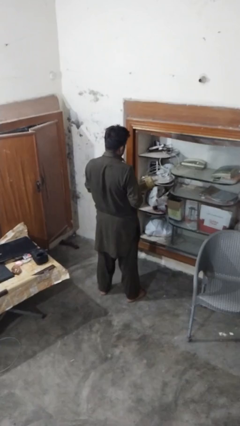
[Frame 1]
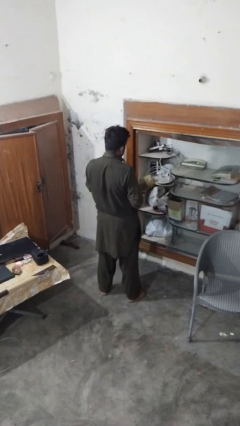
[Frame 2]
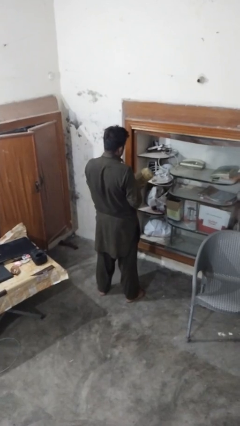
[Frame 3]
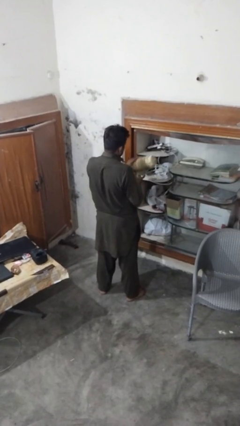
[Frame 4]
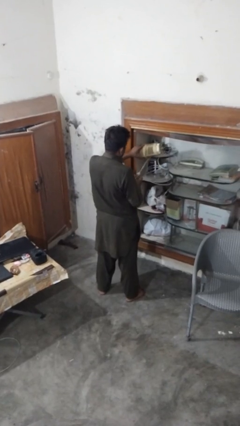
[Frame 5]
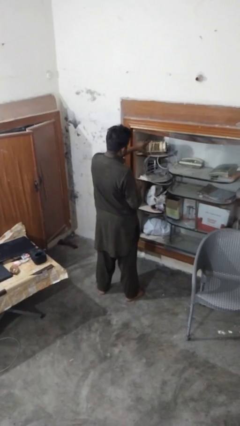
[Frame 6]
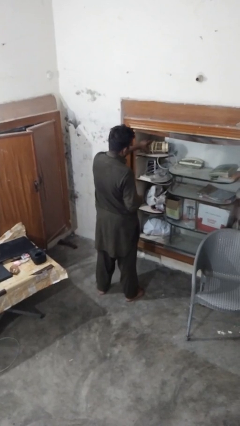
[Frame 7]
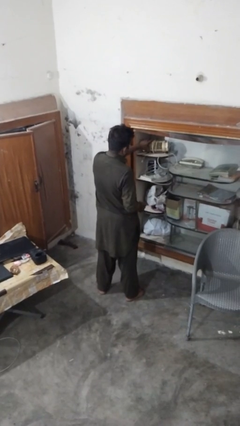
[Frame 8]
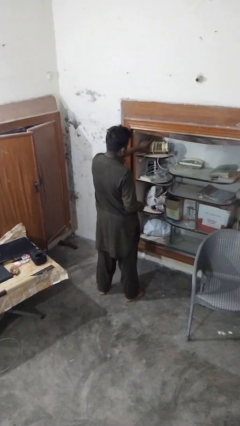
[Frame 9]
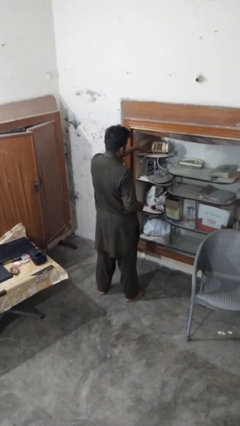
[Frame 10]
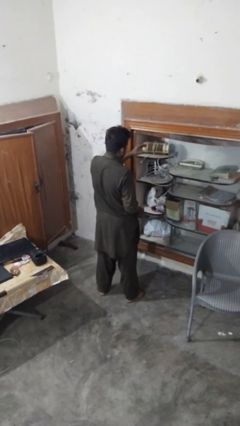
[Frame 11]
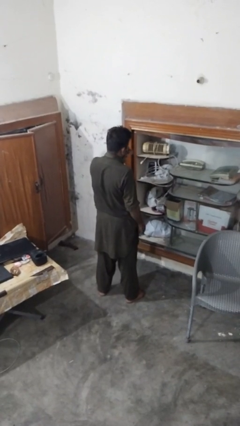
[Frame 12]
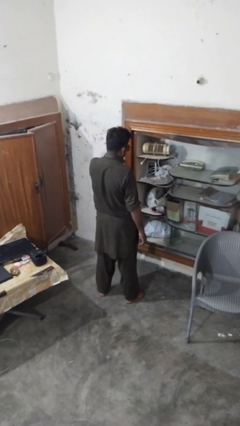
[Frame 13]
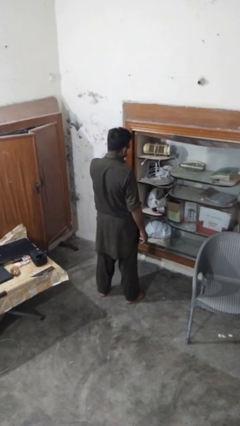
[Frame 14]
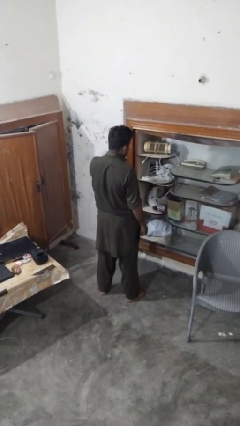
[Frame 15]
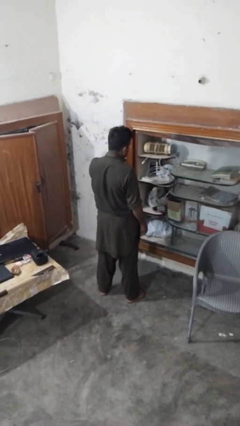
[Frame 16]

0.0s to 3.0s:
person puts down object on countertop

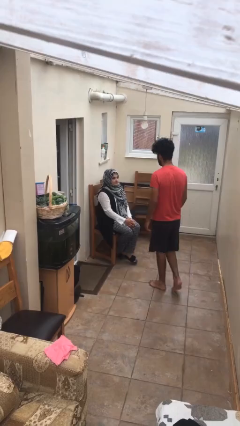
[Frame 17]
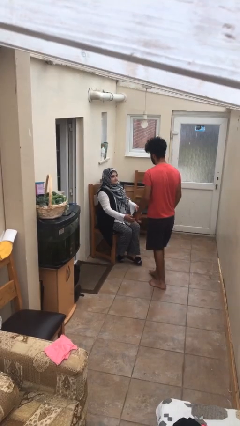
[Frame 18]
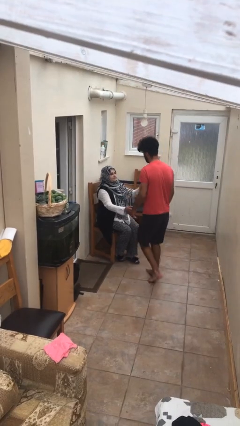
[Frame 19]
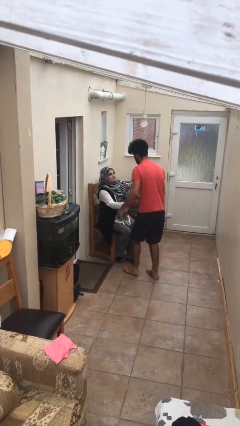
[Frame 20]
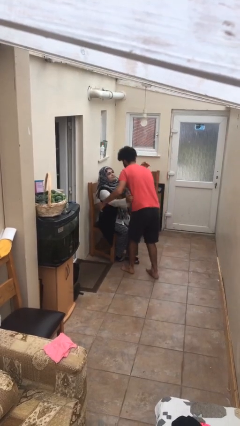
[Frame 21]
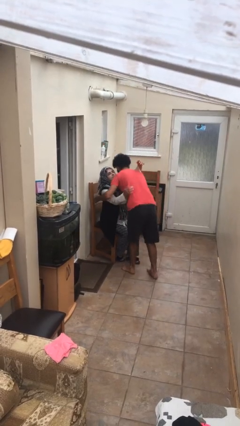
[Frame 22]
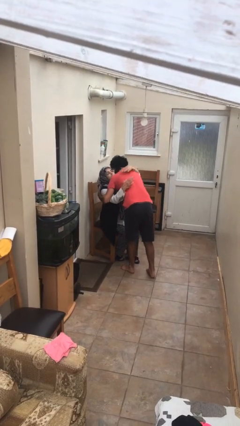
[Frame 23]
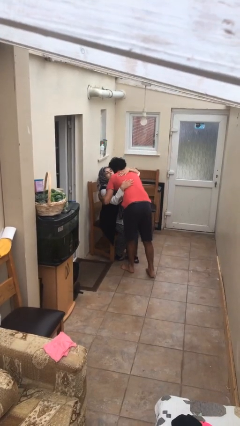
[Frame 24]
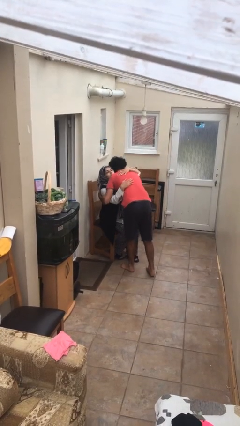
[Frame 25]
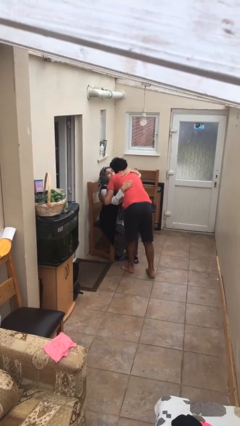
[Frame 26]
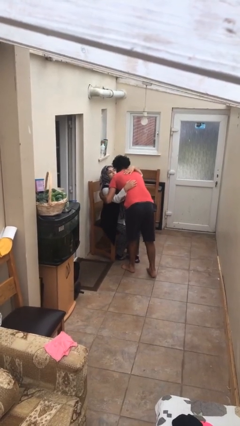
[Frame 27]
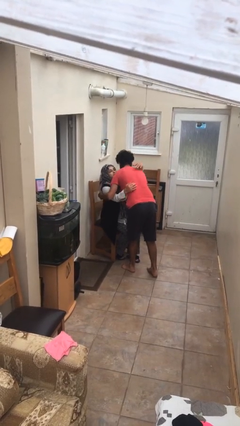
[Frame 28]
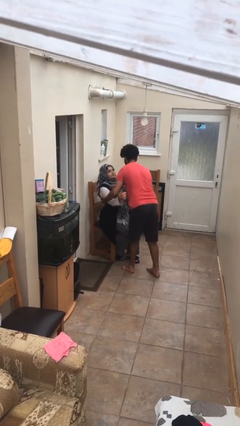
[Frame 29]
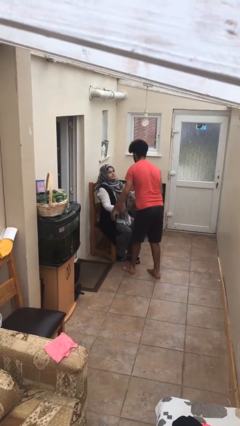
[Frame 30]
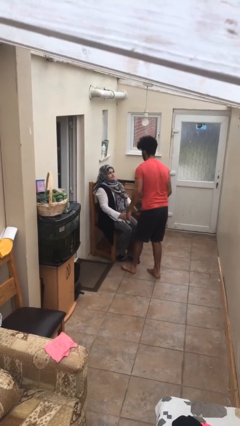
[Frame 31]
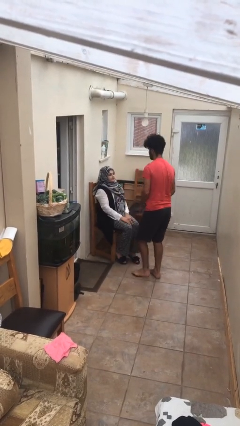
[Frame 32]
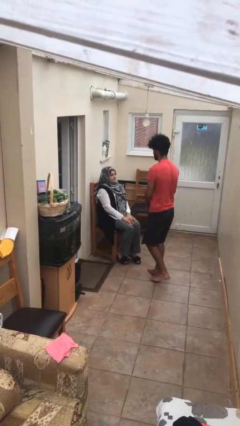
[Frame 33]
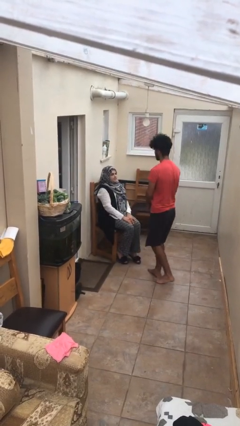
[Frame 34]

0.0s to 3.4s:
person embraces person

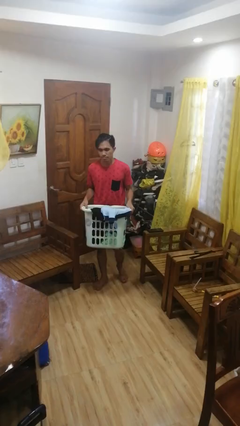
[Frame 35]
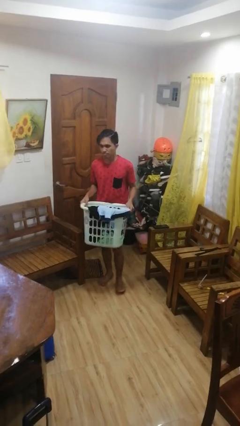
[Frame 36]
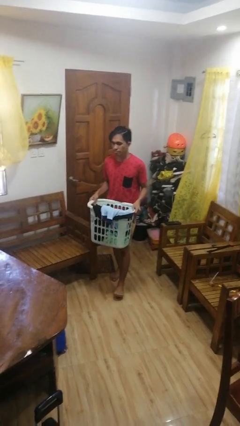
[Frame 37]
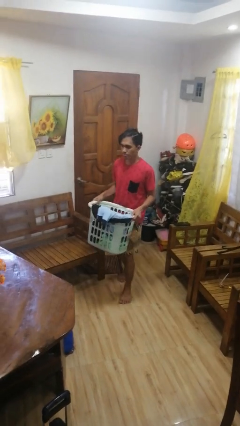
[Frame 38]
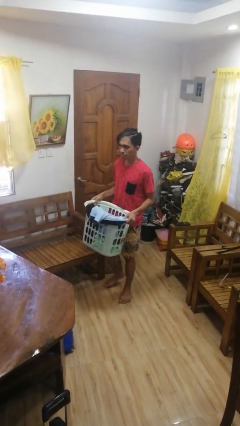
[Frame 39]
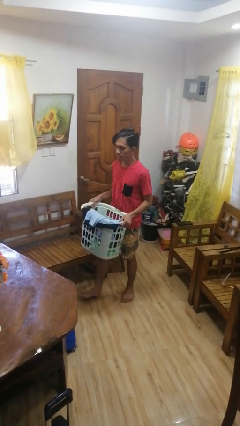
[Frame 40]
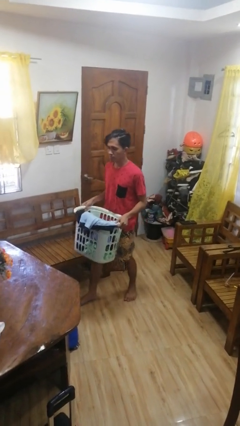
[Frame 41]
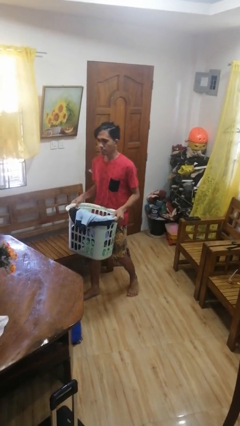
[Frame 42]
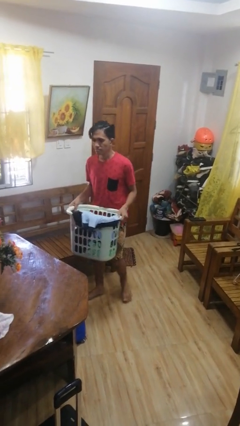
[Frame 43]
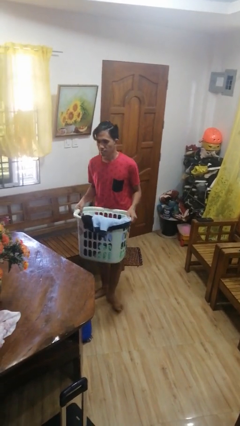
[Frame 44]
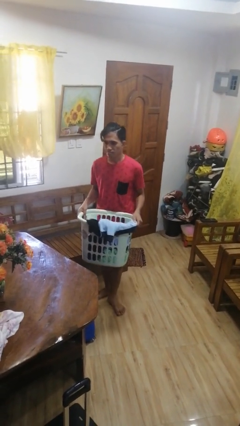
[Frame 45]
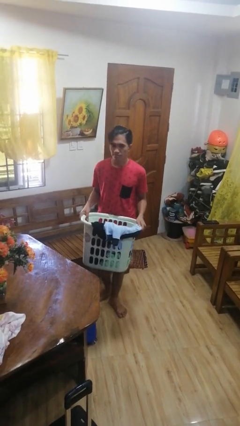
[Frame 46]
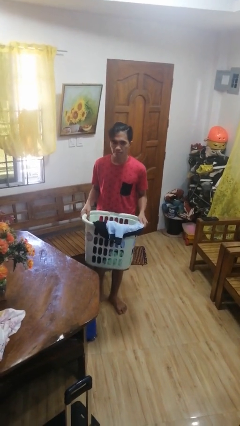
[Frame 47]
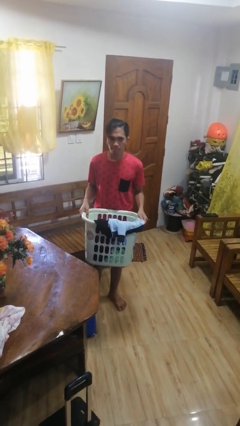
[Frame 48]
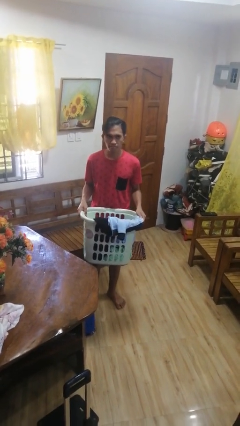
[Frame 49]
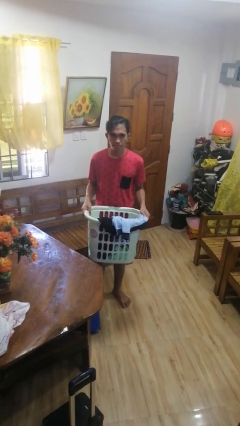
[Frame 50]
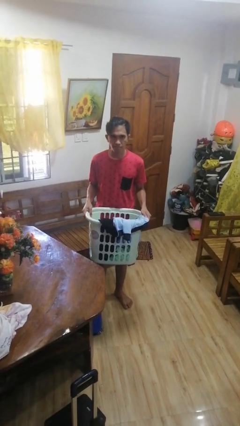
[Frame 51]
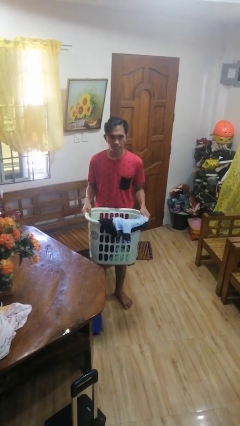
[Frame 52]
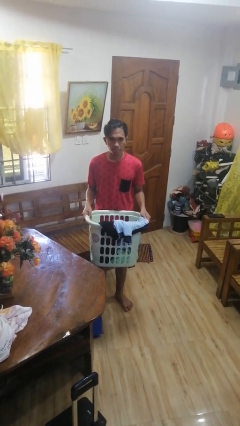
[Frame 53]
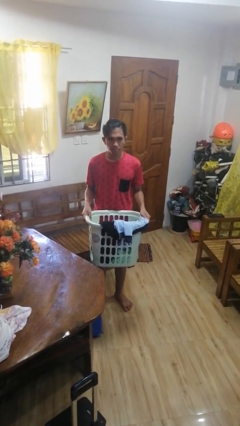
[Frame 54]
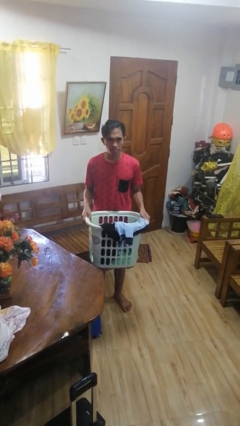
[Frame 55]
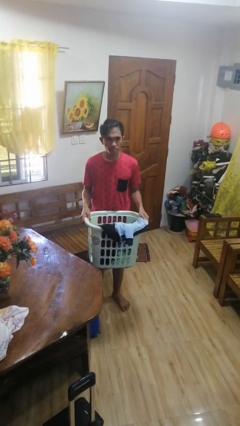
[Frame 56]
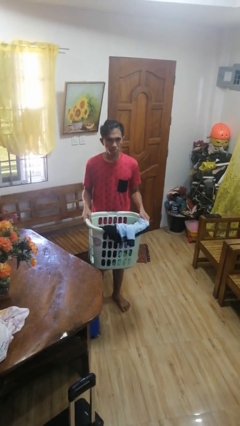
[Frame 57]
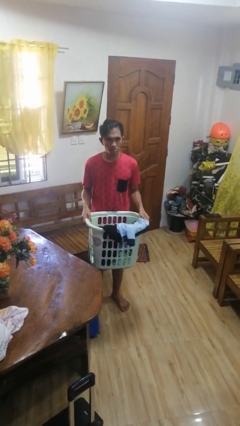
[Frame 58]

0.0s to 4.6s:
person carries laundry basket

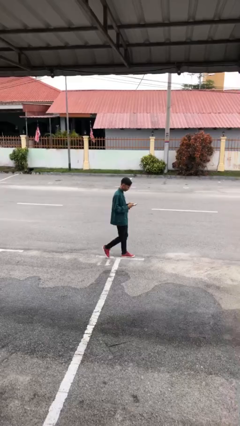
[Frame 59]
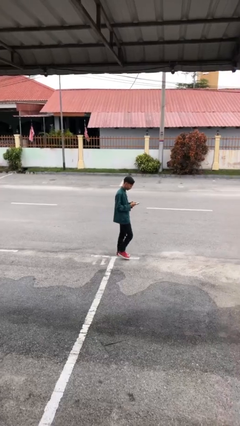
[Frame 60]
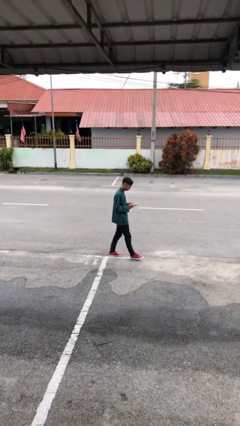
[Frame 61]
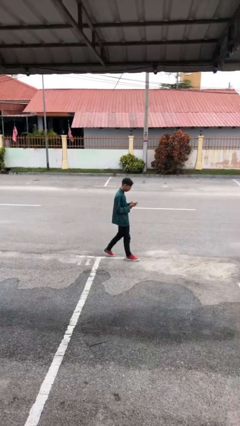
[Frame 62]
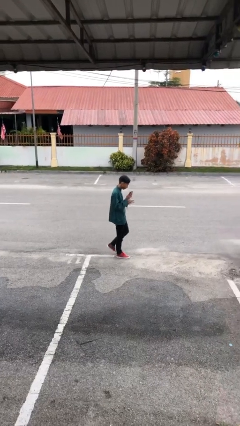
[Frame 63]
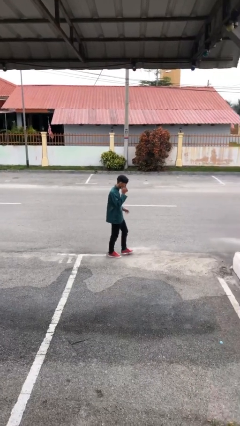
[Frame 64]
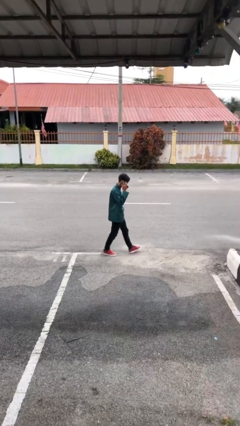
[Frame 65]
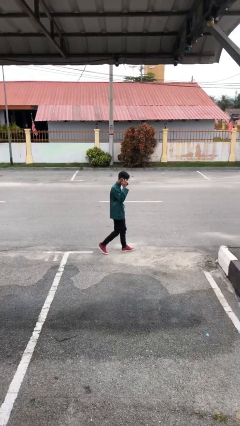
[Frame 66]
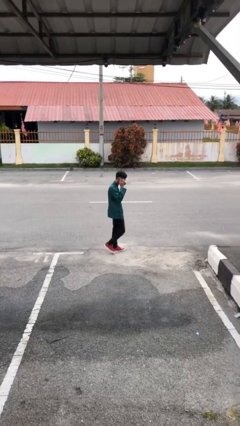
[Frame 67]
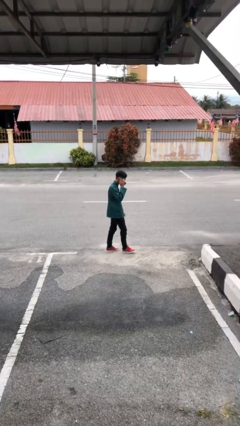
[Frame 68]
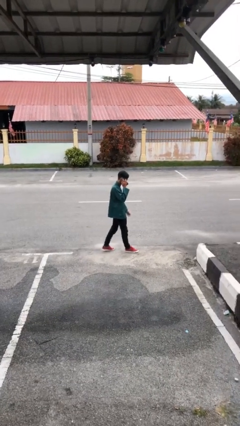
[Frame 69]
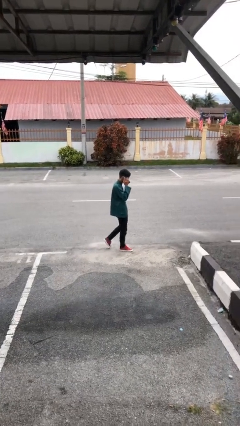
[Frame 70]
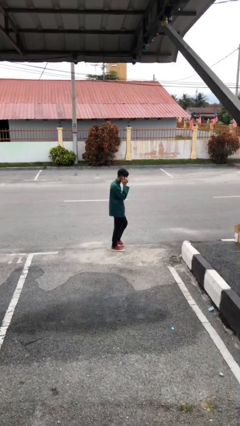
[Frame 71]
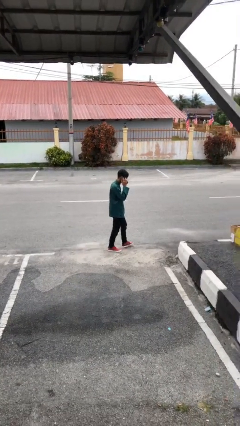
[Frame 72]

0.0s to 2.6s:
person talks on phone

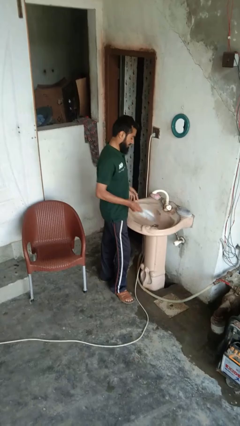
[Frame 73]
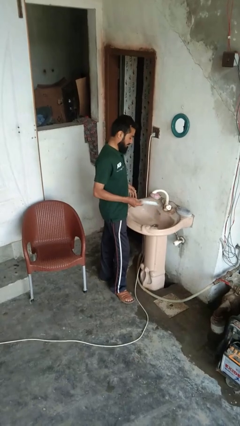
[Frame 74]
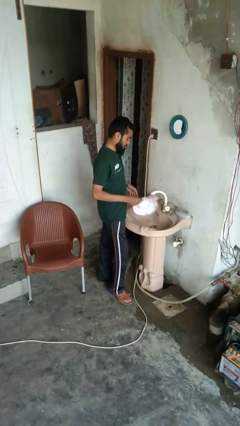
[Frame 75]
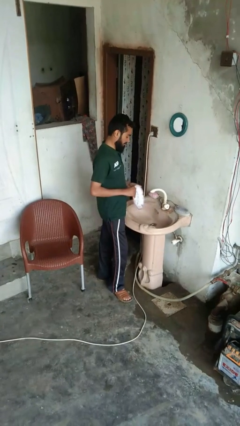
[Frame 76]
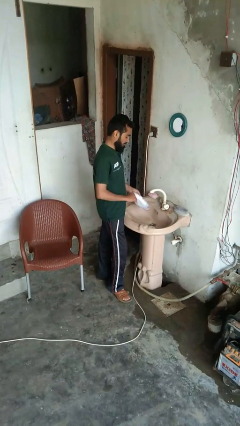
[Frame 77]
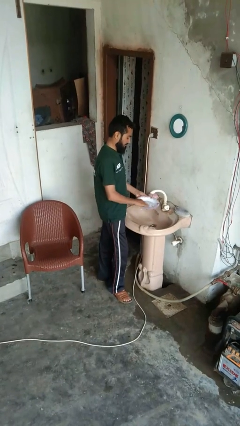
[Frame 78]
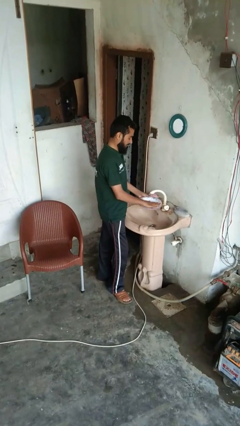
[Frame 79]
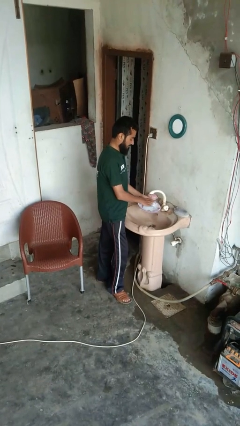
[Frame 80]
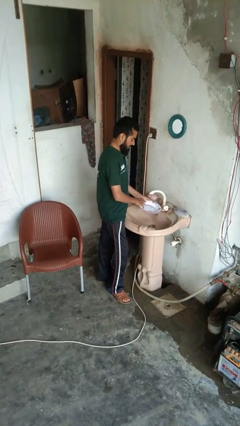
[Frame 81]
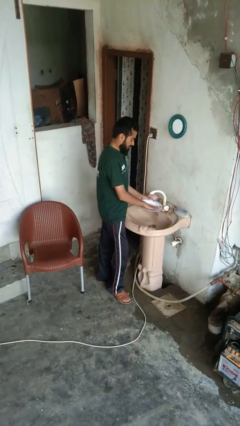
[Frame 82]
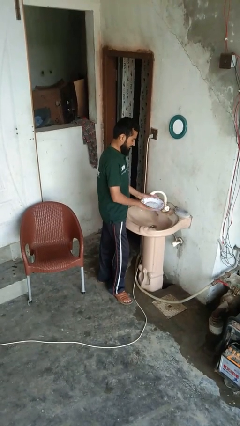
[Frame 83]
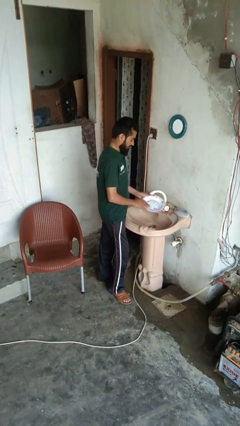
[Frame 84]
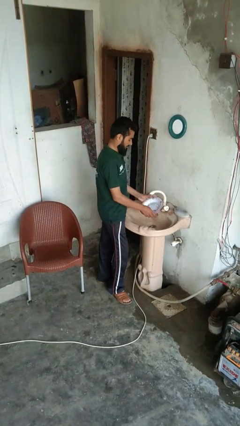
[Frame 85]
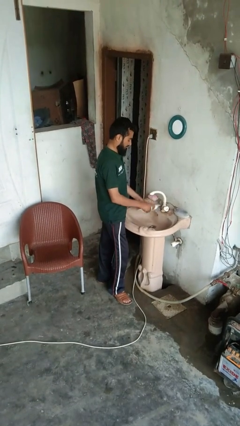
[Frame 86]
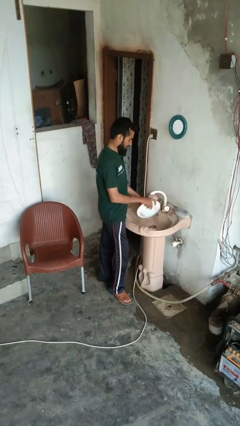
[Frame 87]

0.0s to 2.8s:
person washes dish

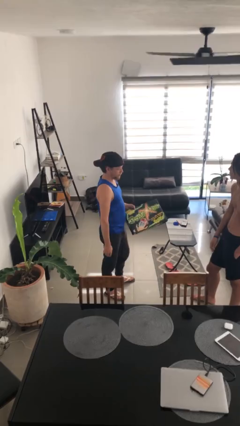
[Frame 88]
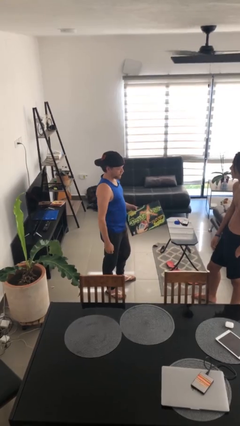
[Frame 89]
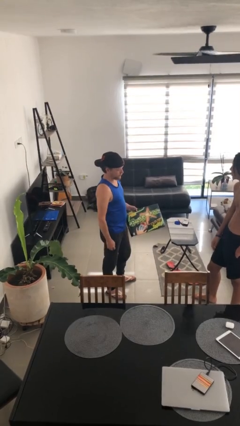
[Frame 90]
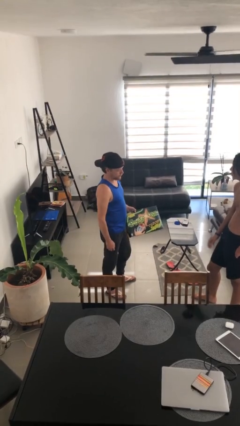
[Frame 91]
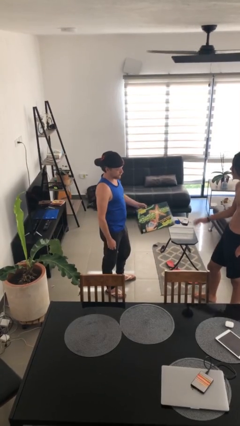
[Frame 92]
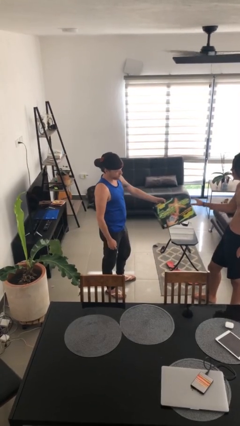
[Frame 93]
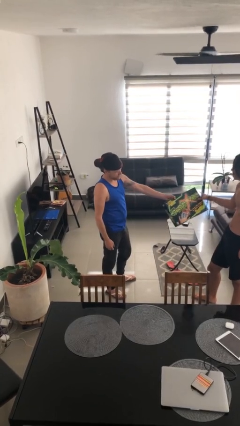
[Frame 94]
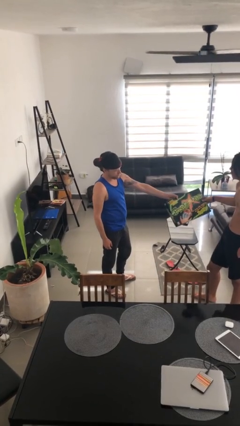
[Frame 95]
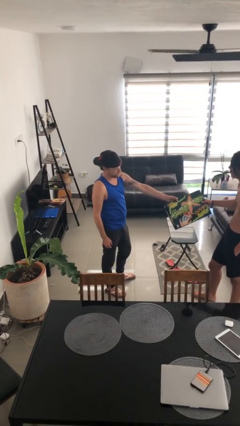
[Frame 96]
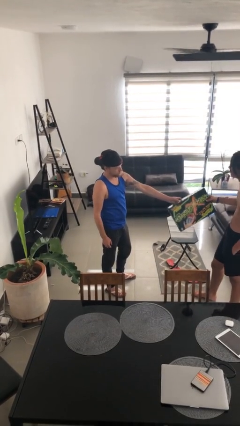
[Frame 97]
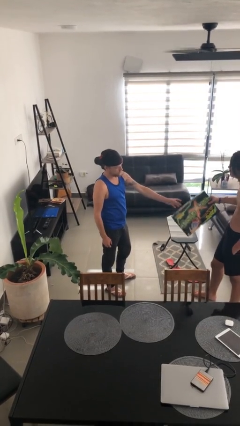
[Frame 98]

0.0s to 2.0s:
person transfers object to person
